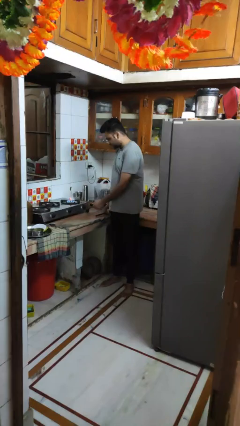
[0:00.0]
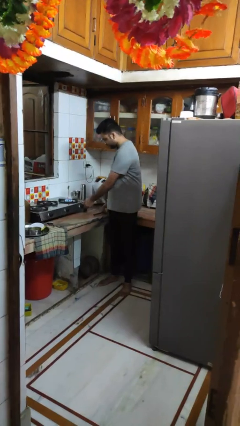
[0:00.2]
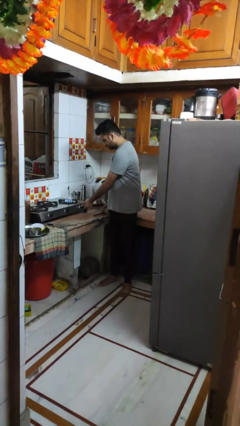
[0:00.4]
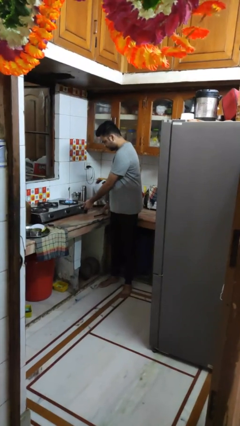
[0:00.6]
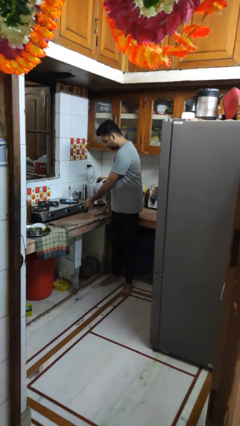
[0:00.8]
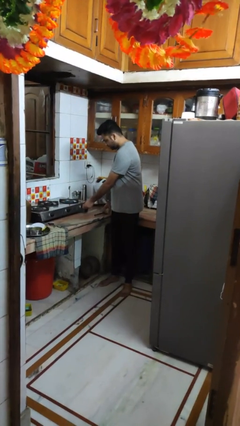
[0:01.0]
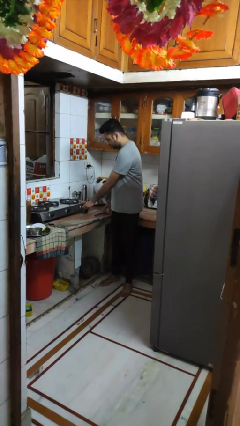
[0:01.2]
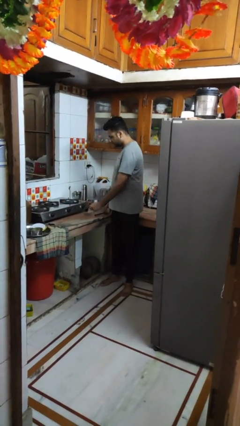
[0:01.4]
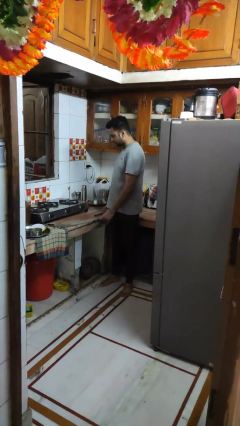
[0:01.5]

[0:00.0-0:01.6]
person turns off stovetop

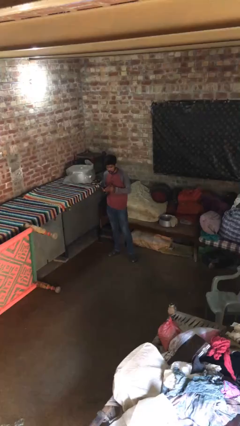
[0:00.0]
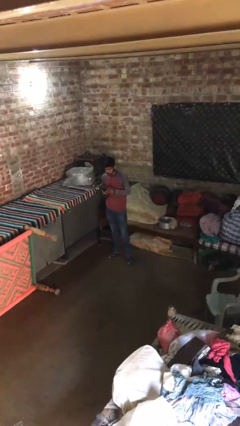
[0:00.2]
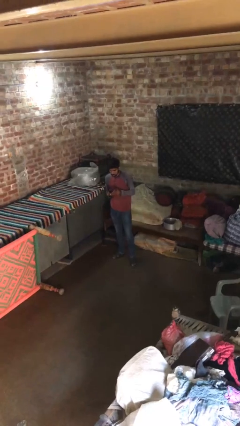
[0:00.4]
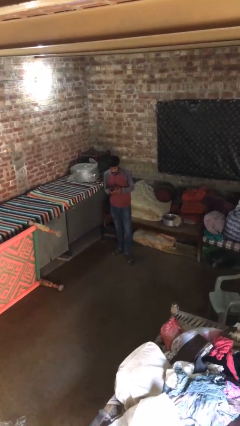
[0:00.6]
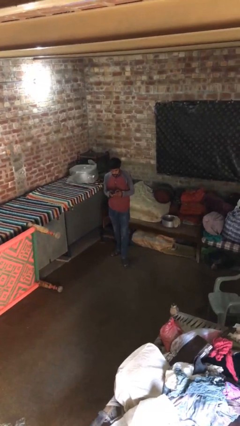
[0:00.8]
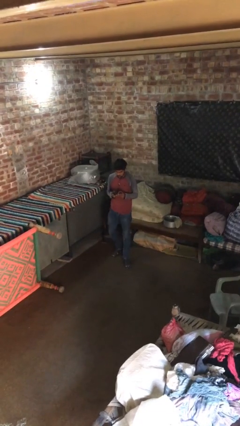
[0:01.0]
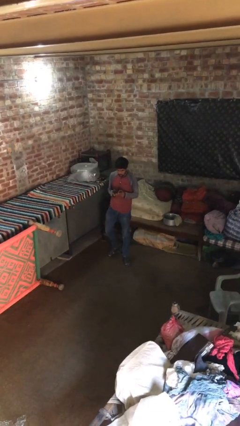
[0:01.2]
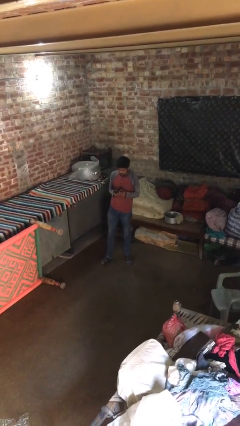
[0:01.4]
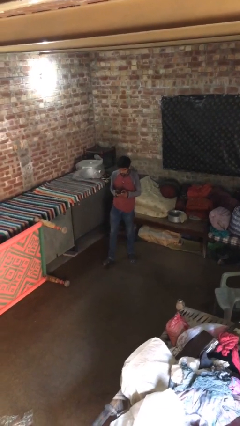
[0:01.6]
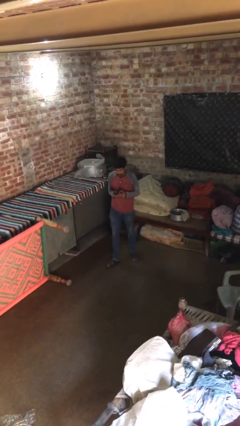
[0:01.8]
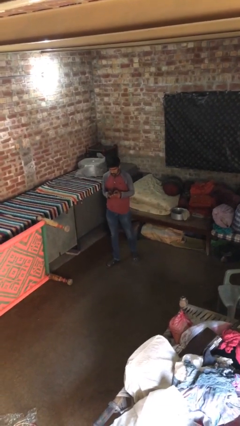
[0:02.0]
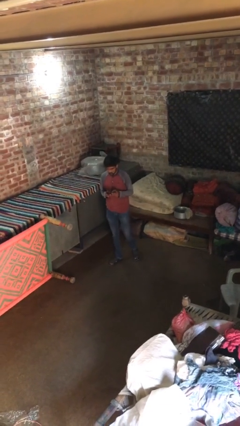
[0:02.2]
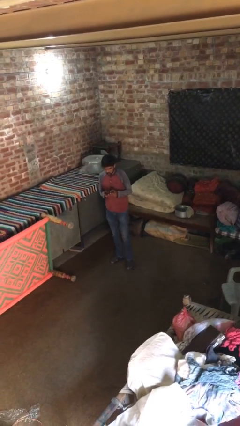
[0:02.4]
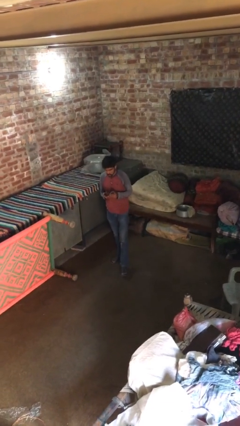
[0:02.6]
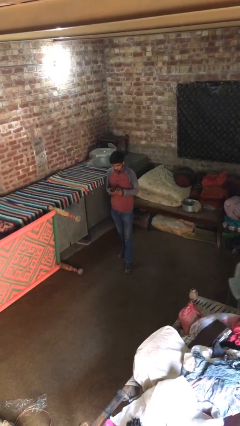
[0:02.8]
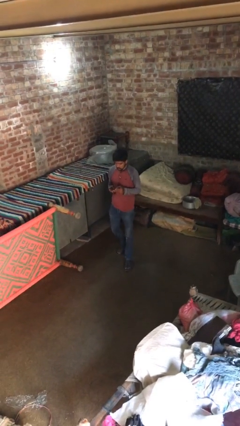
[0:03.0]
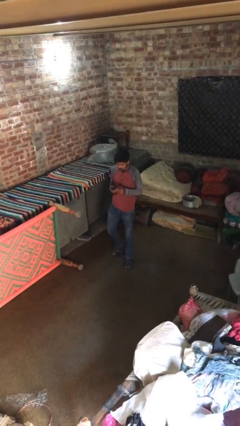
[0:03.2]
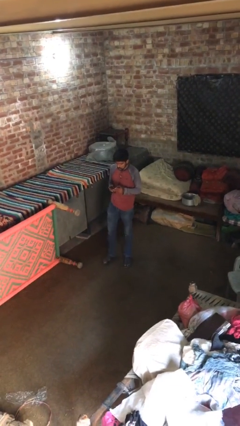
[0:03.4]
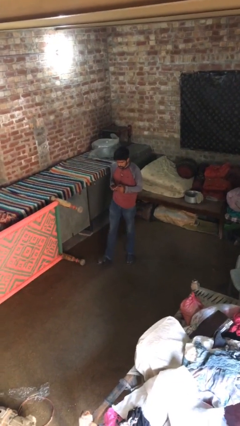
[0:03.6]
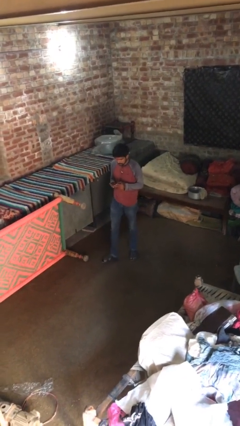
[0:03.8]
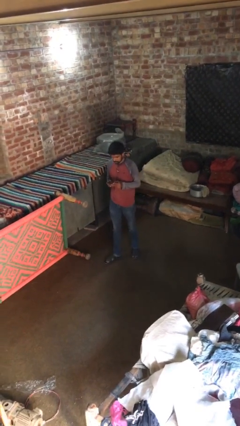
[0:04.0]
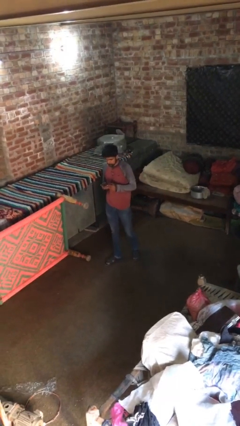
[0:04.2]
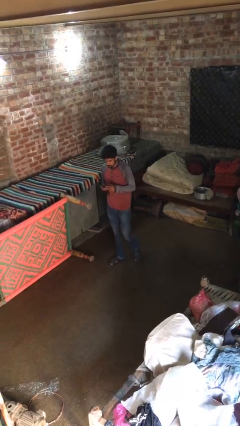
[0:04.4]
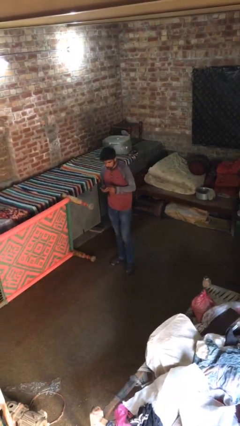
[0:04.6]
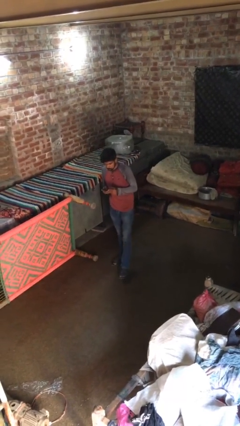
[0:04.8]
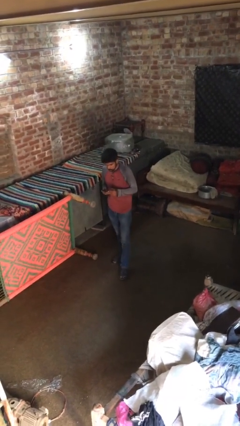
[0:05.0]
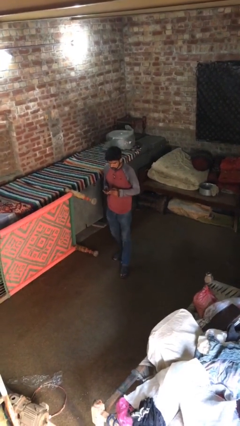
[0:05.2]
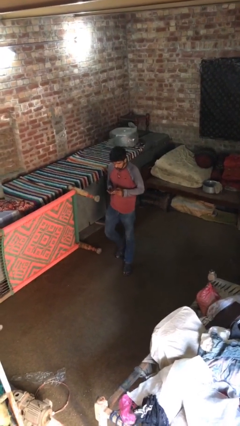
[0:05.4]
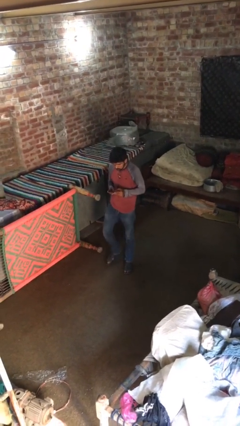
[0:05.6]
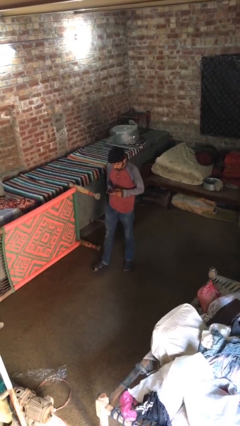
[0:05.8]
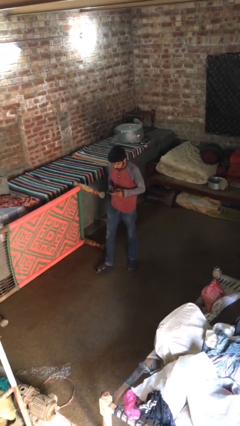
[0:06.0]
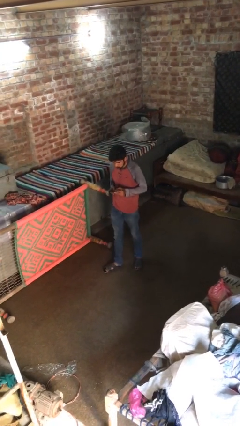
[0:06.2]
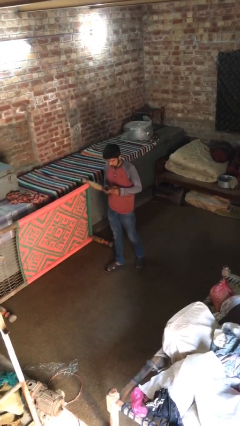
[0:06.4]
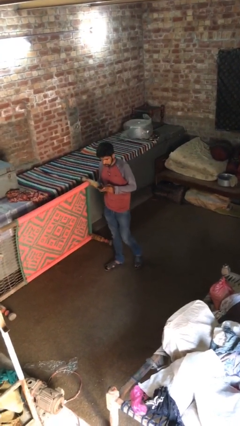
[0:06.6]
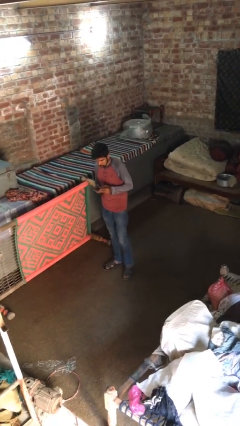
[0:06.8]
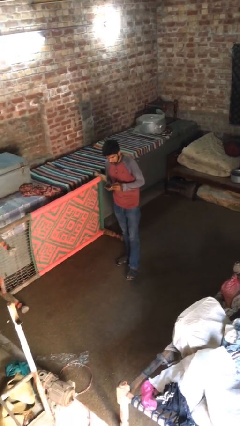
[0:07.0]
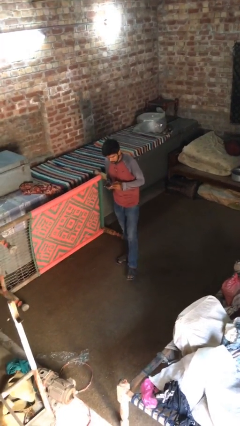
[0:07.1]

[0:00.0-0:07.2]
person texts on phone

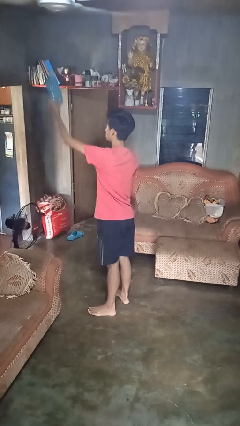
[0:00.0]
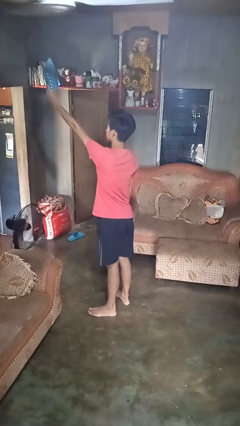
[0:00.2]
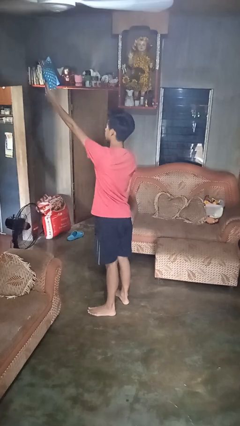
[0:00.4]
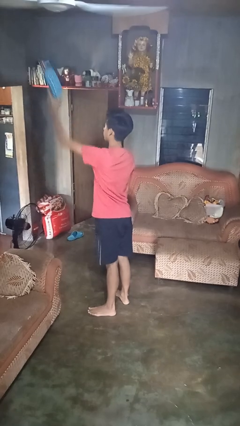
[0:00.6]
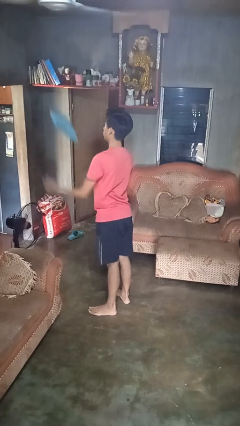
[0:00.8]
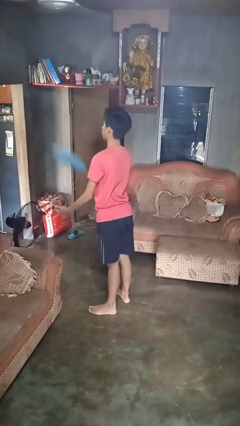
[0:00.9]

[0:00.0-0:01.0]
person drops object

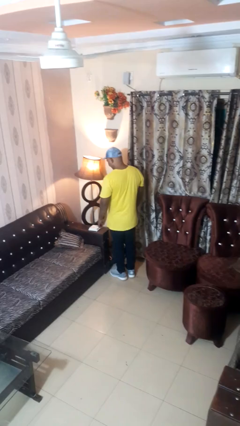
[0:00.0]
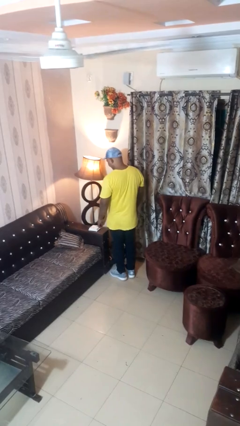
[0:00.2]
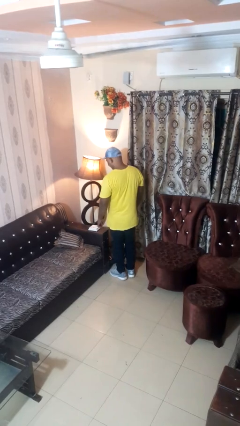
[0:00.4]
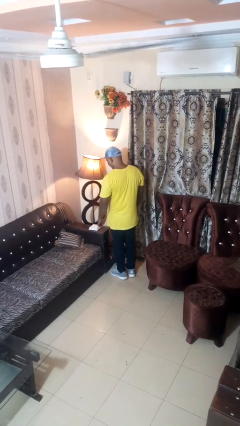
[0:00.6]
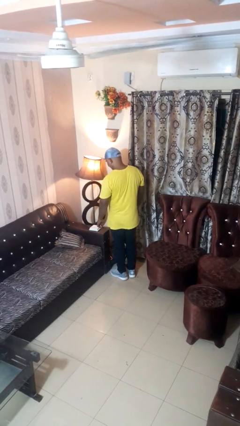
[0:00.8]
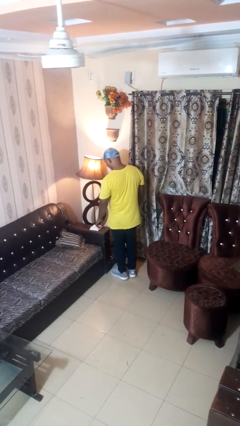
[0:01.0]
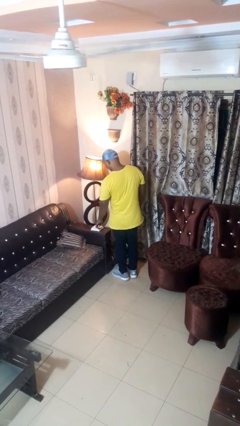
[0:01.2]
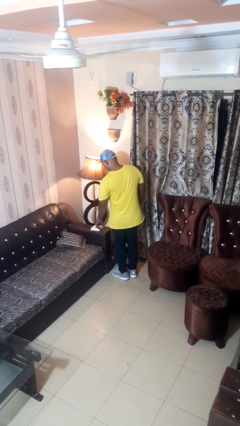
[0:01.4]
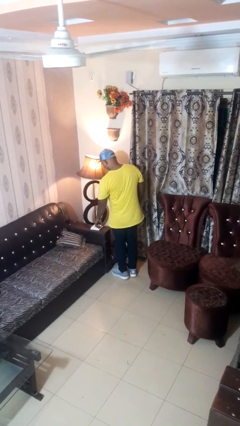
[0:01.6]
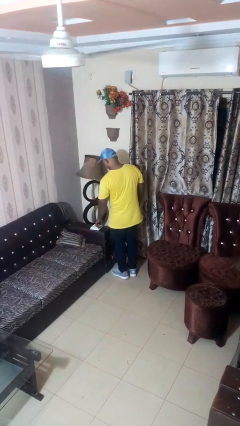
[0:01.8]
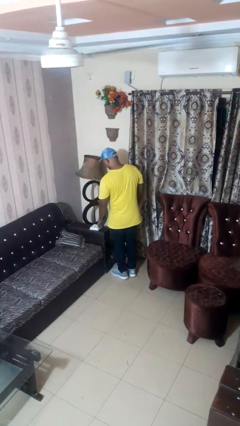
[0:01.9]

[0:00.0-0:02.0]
person turns off lamp

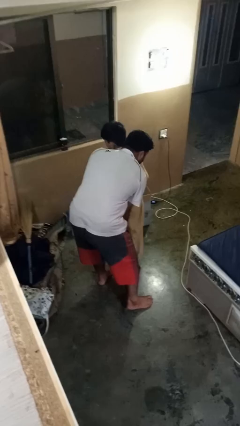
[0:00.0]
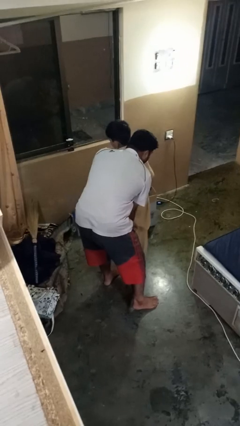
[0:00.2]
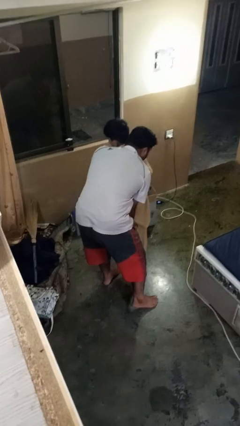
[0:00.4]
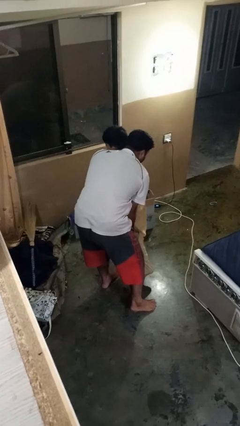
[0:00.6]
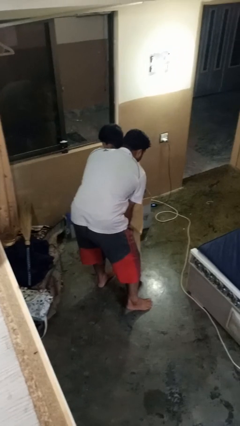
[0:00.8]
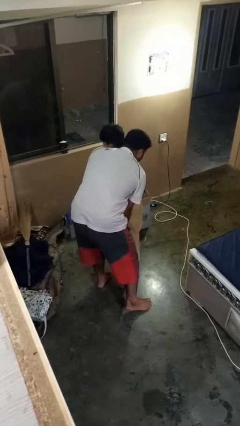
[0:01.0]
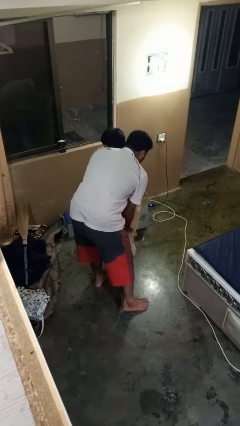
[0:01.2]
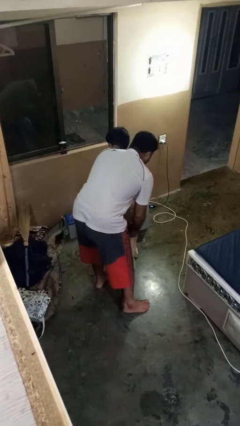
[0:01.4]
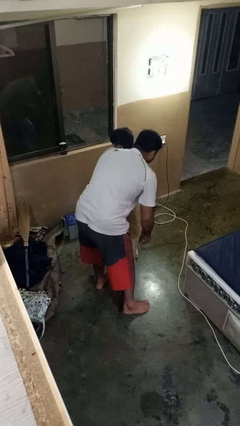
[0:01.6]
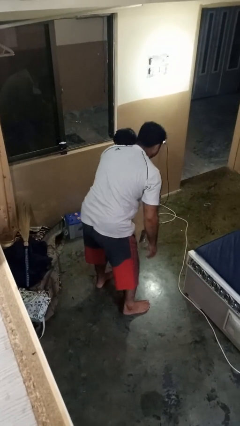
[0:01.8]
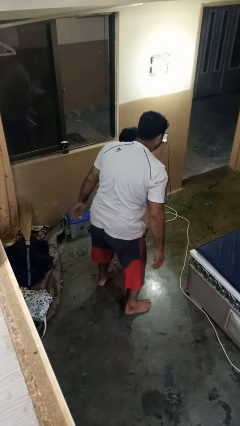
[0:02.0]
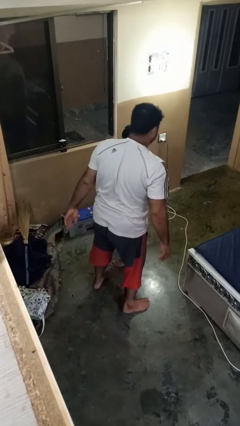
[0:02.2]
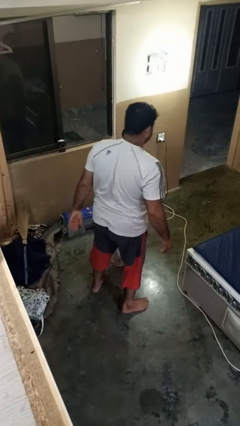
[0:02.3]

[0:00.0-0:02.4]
person puts down person

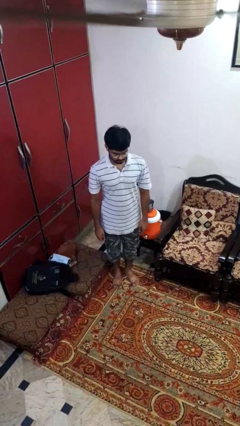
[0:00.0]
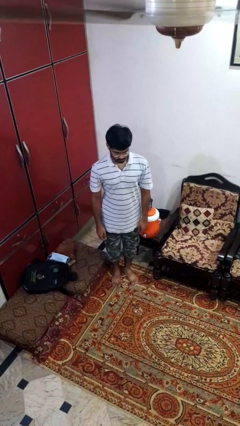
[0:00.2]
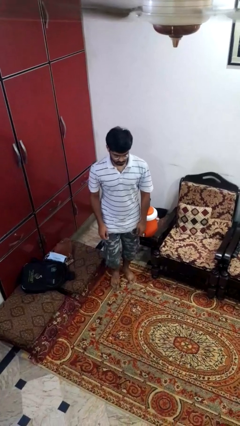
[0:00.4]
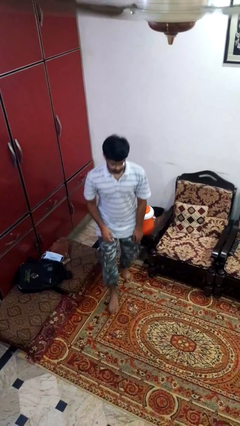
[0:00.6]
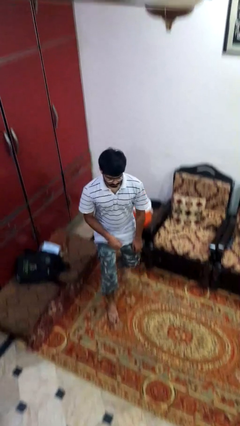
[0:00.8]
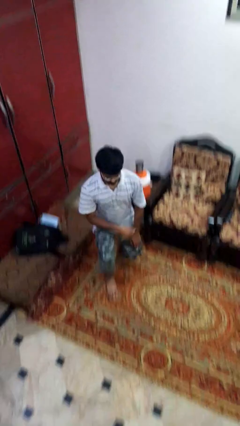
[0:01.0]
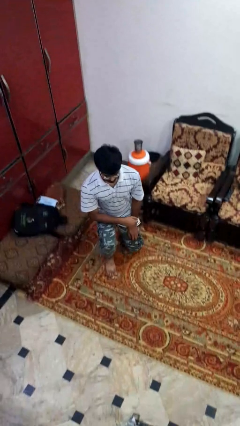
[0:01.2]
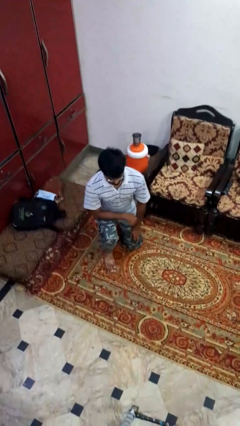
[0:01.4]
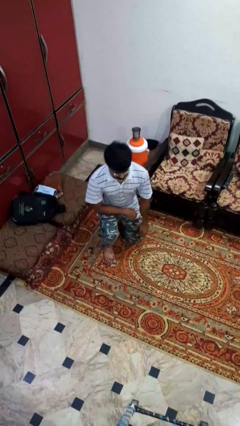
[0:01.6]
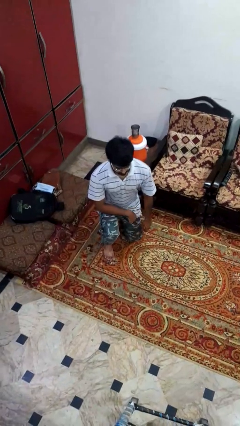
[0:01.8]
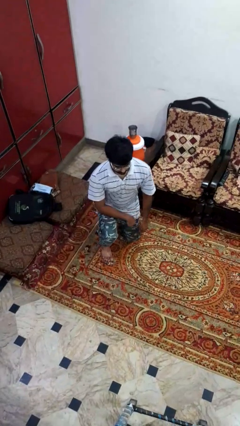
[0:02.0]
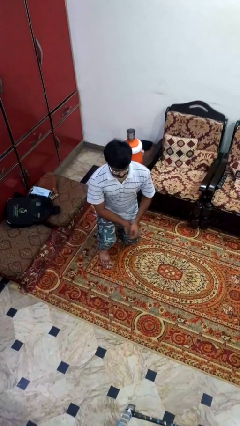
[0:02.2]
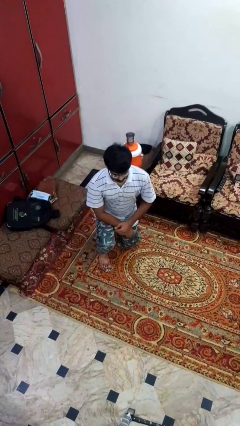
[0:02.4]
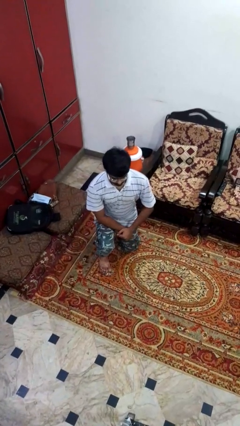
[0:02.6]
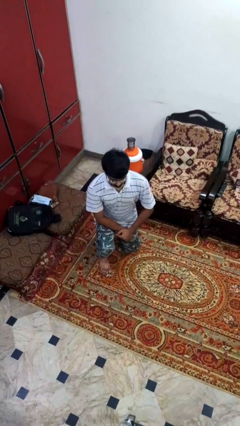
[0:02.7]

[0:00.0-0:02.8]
person kneels

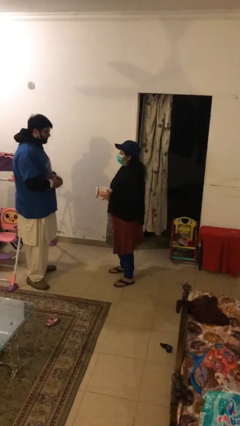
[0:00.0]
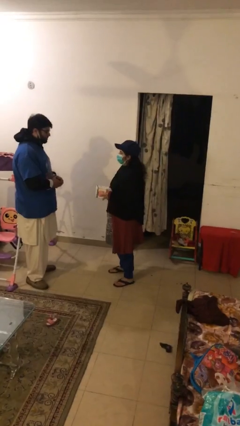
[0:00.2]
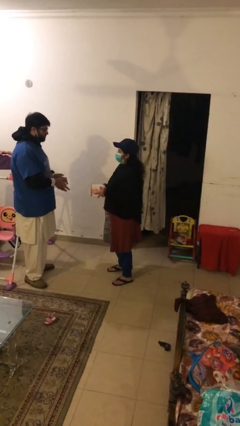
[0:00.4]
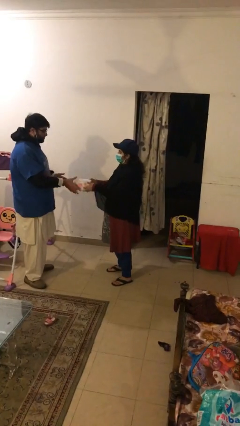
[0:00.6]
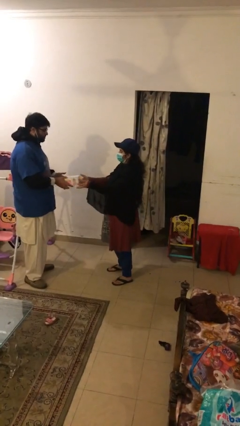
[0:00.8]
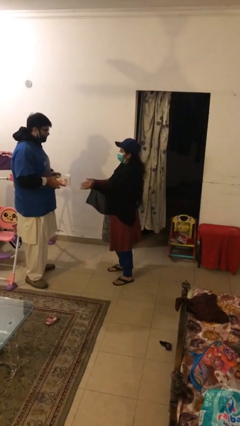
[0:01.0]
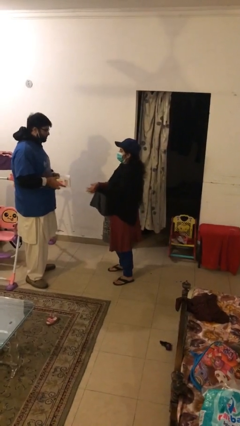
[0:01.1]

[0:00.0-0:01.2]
person transfers object to person
